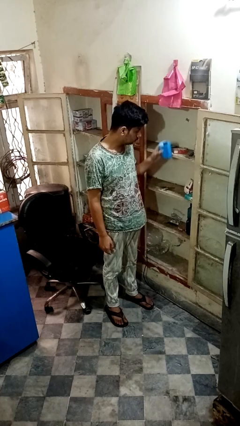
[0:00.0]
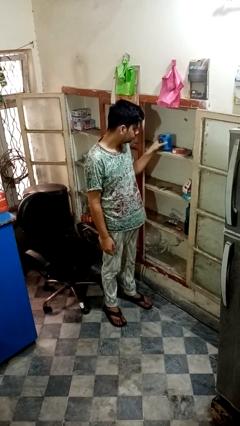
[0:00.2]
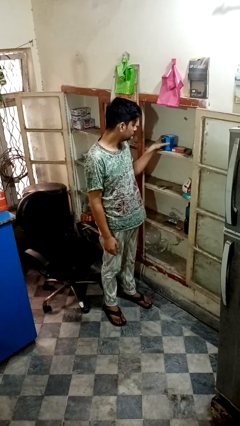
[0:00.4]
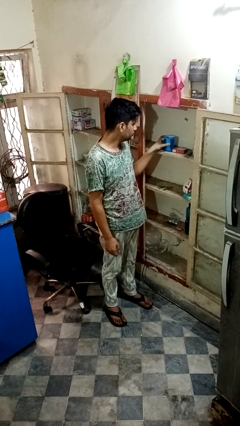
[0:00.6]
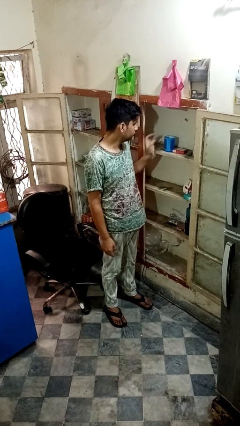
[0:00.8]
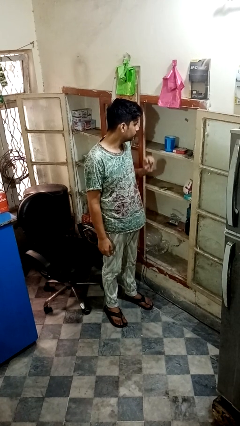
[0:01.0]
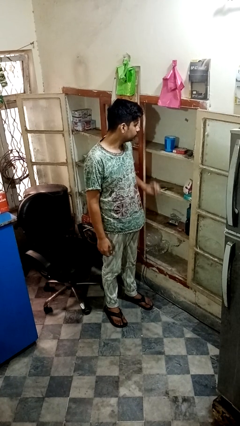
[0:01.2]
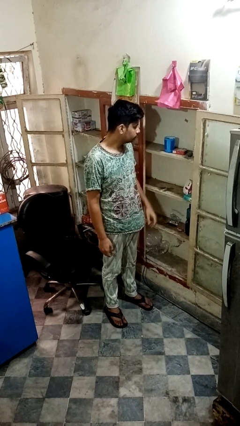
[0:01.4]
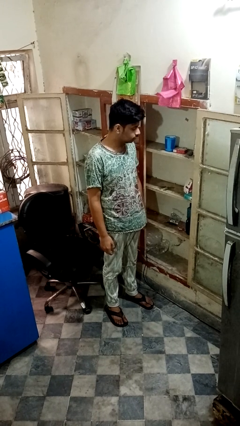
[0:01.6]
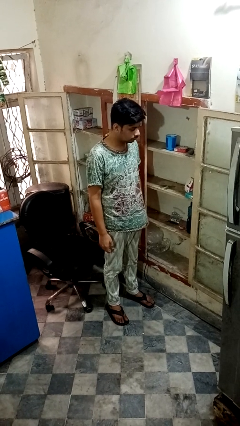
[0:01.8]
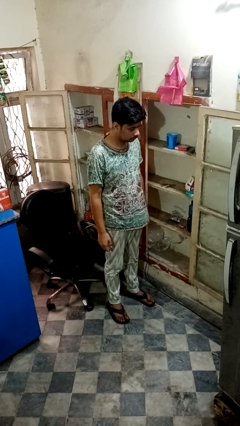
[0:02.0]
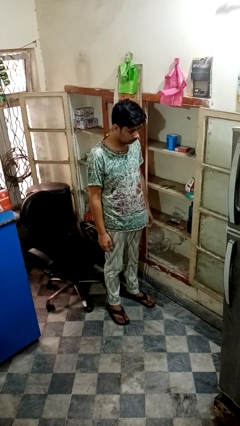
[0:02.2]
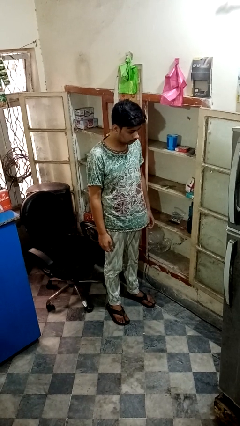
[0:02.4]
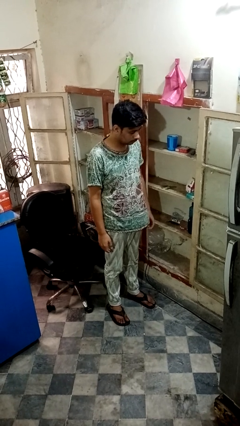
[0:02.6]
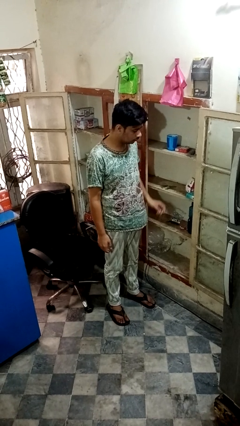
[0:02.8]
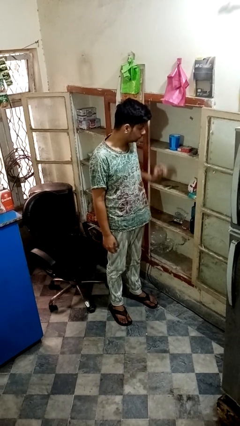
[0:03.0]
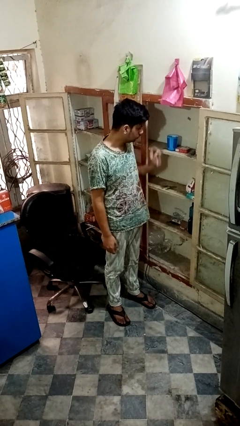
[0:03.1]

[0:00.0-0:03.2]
person puts object in cabinet

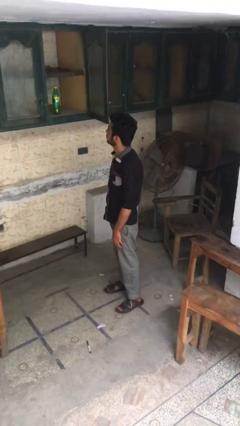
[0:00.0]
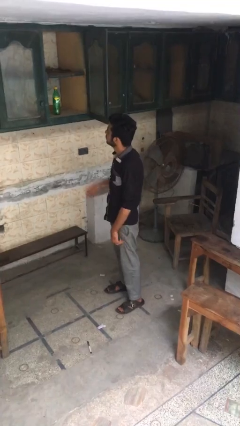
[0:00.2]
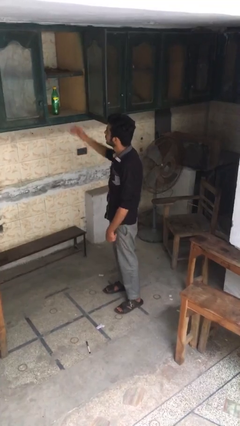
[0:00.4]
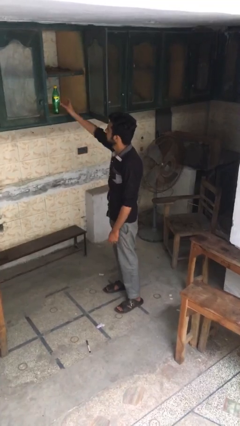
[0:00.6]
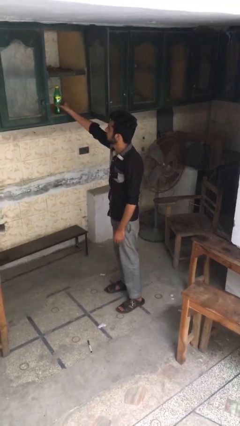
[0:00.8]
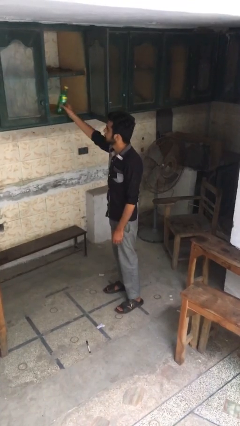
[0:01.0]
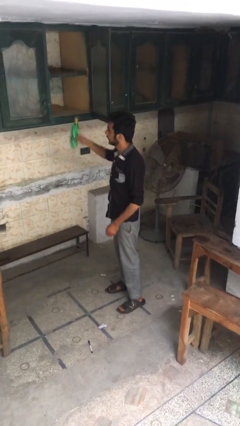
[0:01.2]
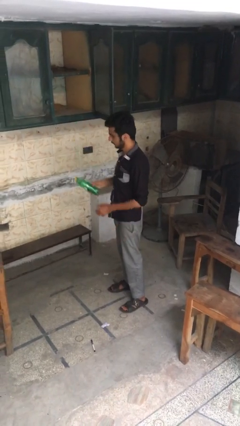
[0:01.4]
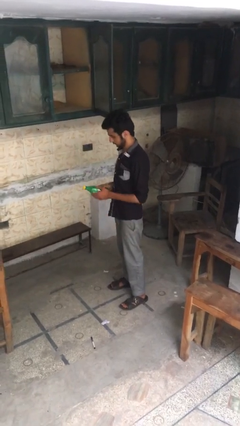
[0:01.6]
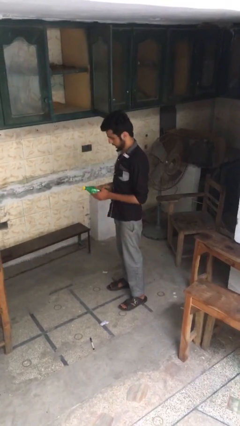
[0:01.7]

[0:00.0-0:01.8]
person takes object from cabinet

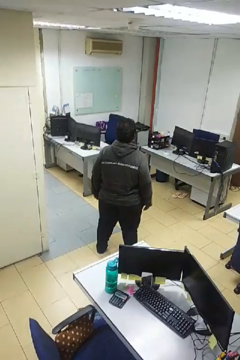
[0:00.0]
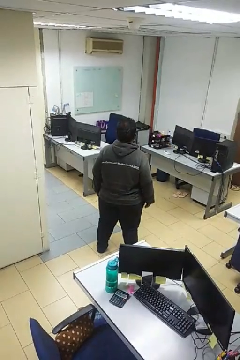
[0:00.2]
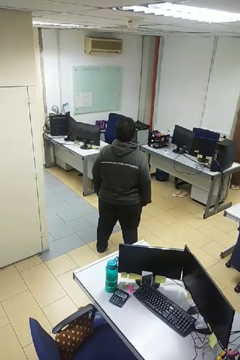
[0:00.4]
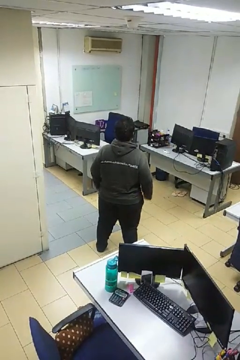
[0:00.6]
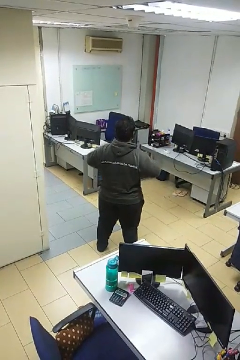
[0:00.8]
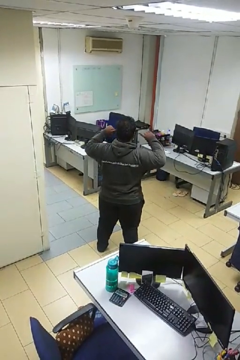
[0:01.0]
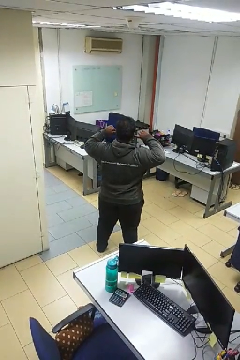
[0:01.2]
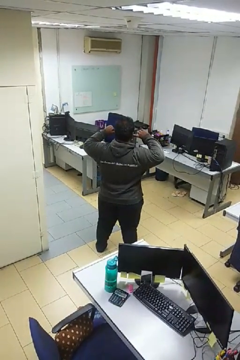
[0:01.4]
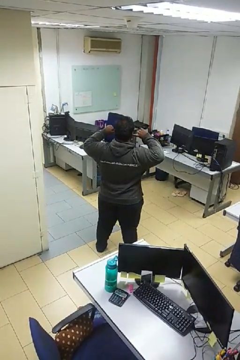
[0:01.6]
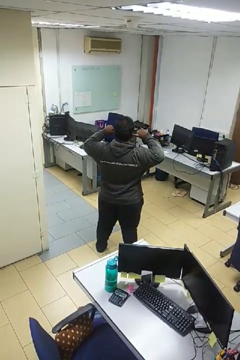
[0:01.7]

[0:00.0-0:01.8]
person puts fingers in ear

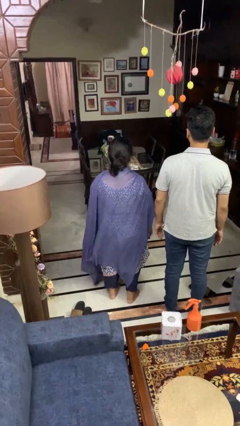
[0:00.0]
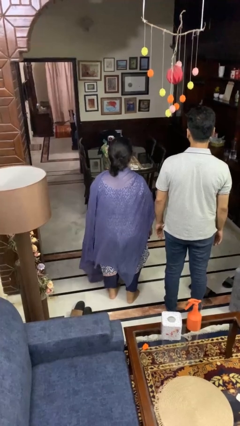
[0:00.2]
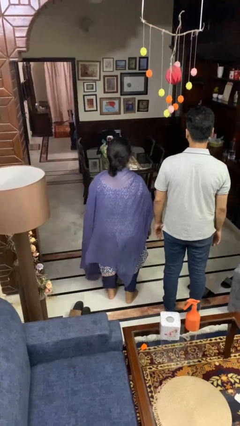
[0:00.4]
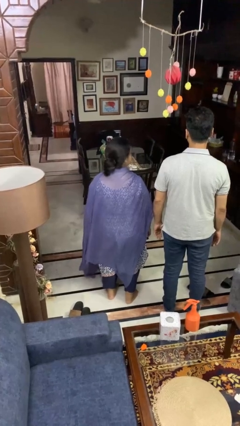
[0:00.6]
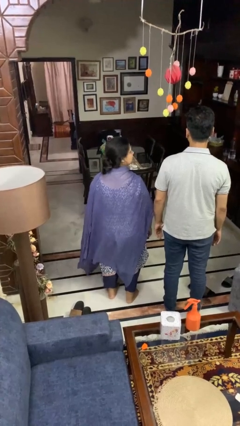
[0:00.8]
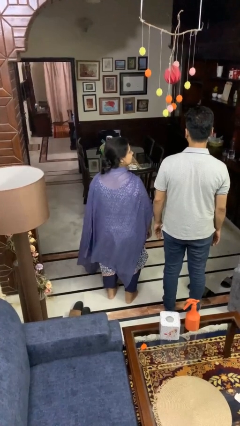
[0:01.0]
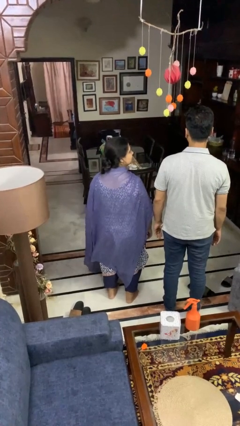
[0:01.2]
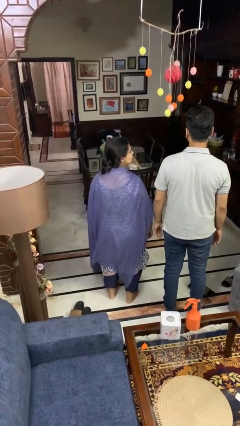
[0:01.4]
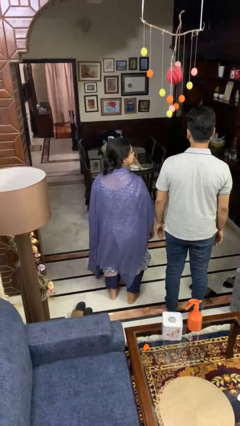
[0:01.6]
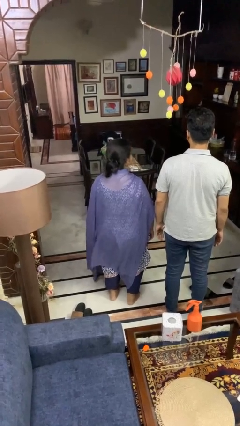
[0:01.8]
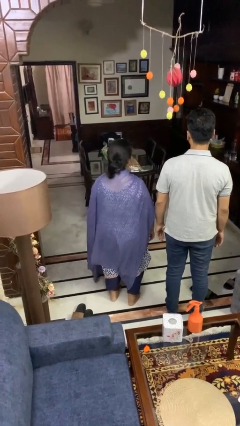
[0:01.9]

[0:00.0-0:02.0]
person looks over shoulder

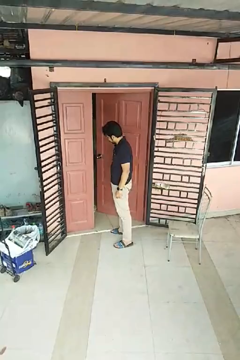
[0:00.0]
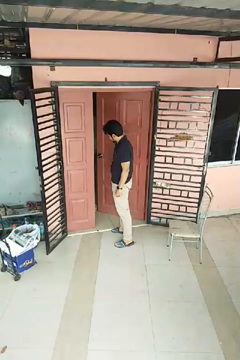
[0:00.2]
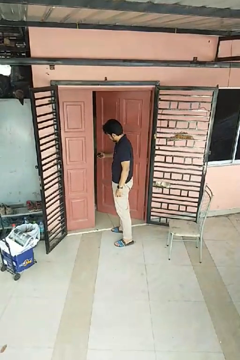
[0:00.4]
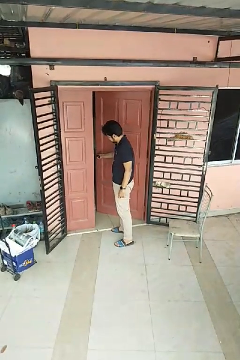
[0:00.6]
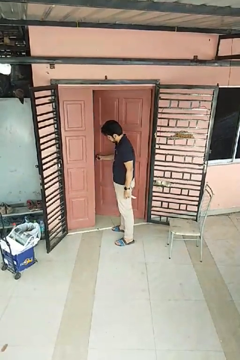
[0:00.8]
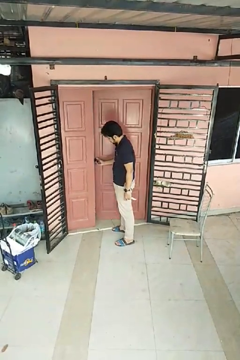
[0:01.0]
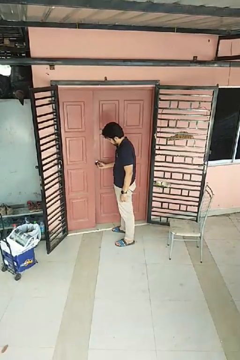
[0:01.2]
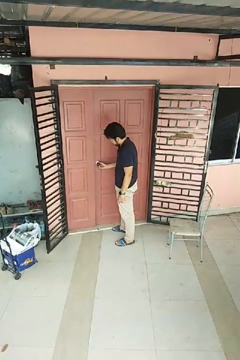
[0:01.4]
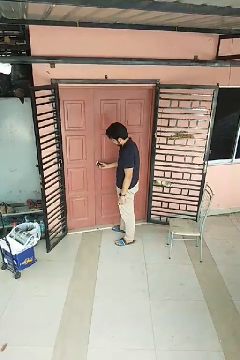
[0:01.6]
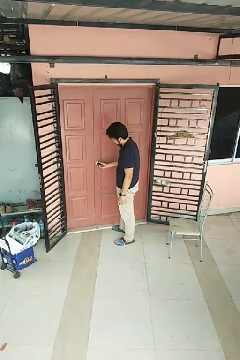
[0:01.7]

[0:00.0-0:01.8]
person closes facility door

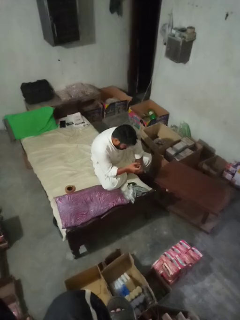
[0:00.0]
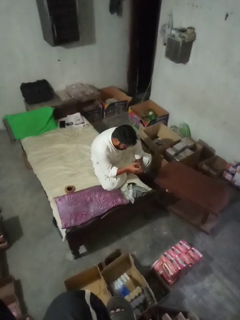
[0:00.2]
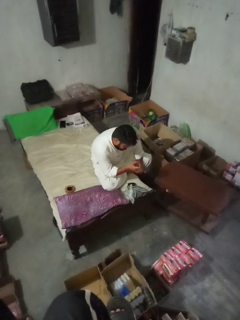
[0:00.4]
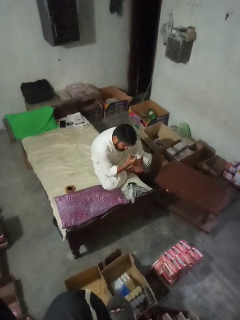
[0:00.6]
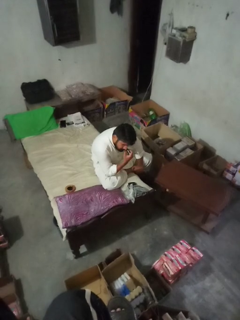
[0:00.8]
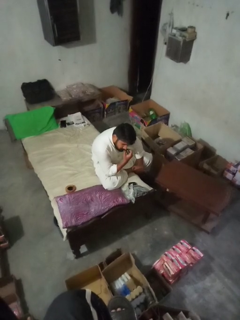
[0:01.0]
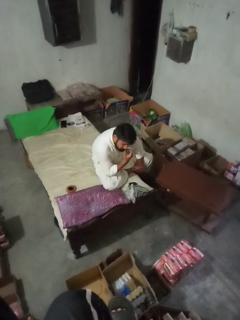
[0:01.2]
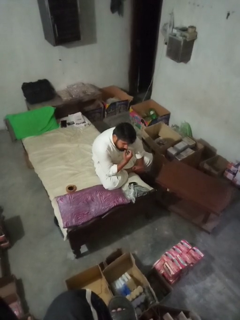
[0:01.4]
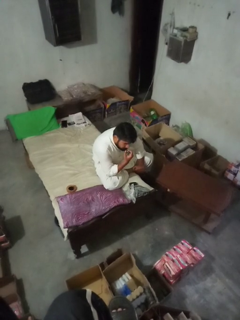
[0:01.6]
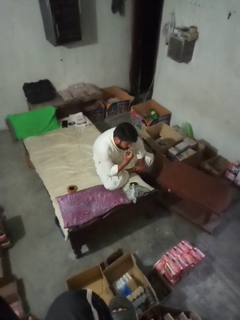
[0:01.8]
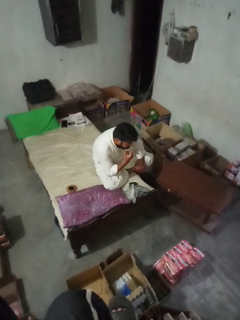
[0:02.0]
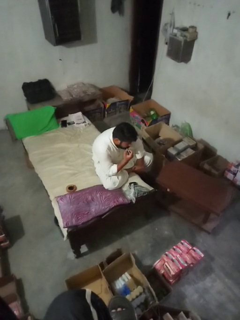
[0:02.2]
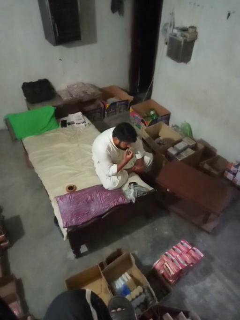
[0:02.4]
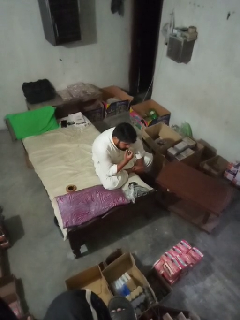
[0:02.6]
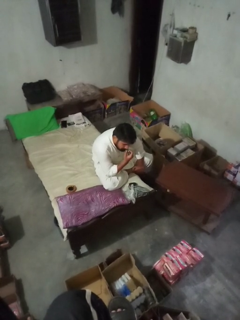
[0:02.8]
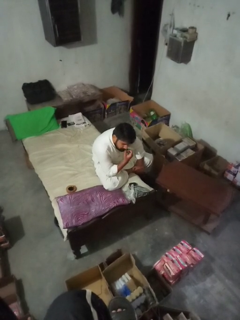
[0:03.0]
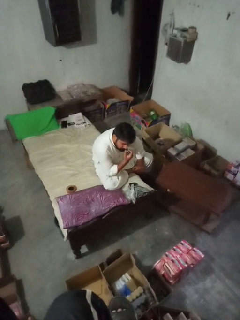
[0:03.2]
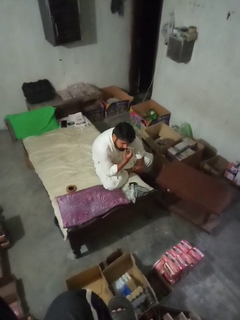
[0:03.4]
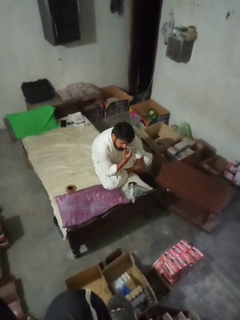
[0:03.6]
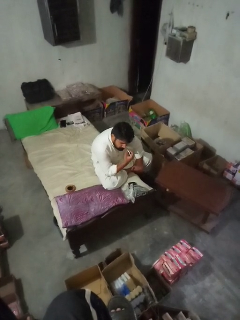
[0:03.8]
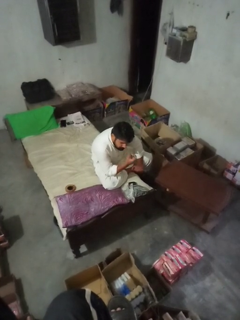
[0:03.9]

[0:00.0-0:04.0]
person applies lip makeup

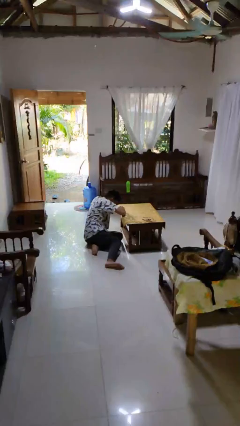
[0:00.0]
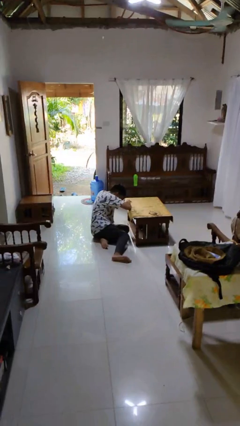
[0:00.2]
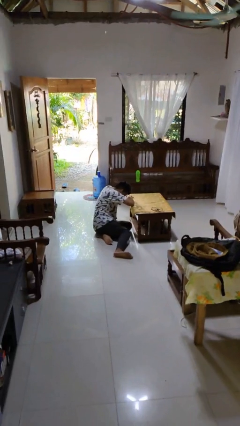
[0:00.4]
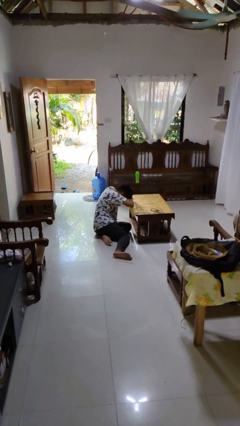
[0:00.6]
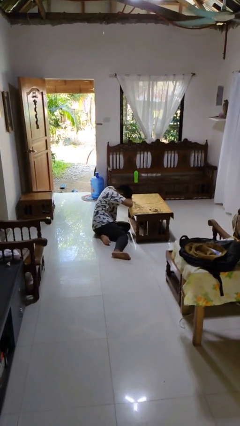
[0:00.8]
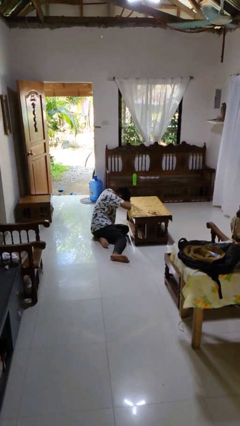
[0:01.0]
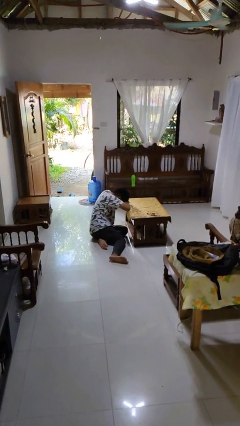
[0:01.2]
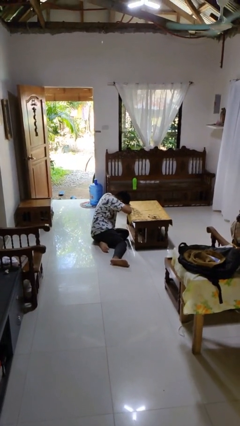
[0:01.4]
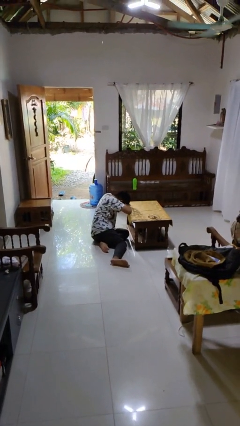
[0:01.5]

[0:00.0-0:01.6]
person lies down on floor

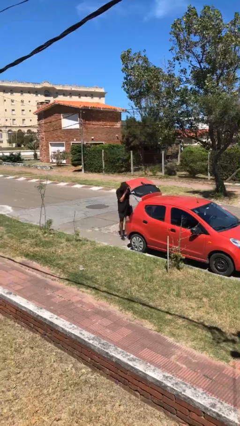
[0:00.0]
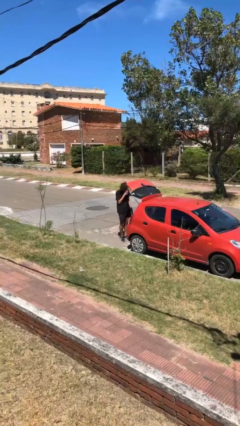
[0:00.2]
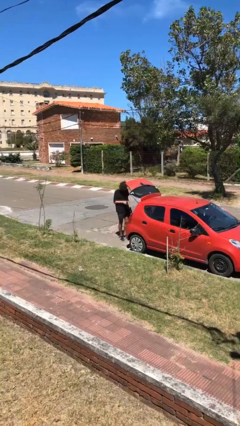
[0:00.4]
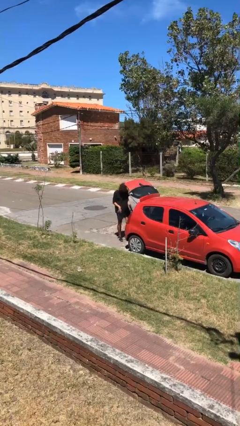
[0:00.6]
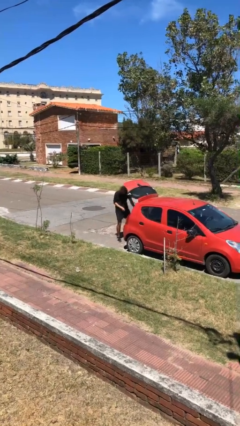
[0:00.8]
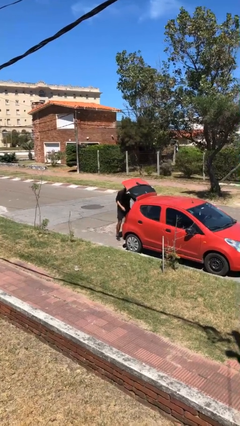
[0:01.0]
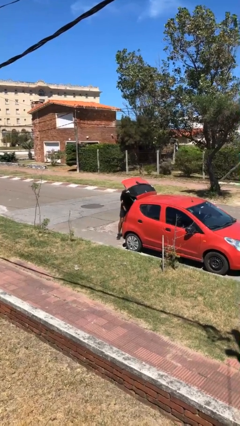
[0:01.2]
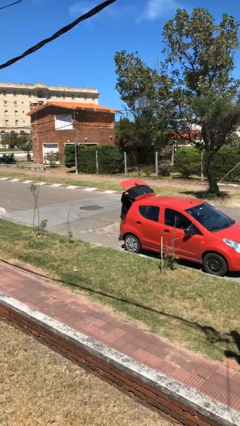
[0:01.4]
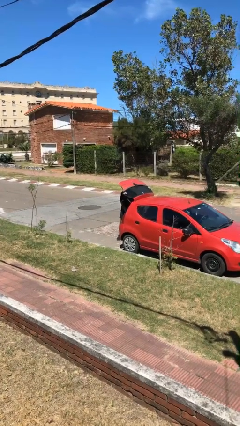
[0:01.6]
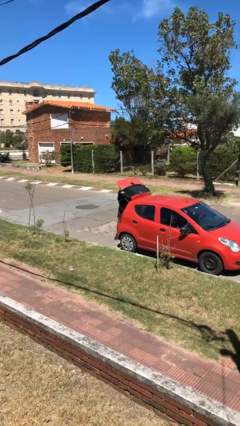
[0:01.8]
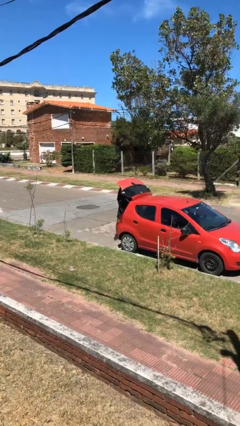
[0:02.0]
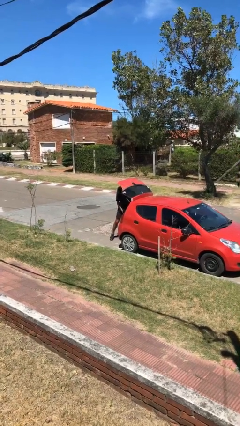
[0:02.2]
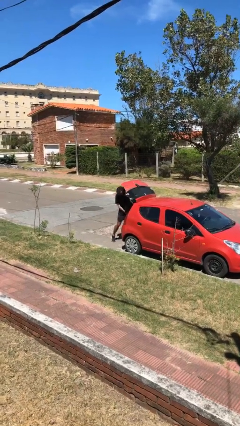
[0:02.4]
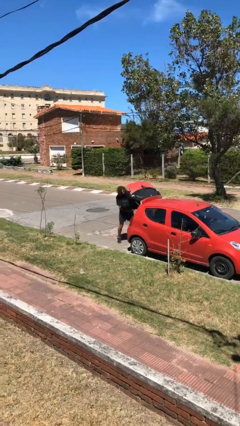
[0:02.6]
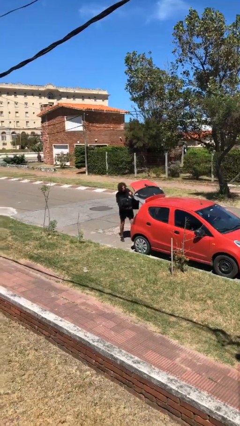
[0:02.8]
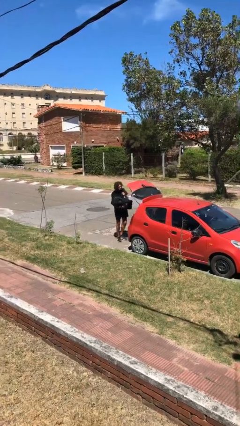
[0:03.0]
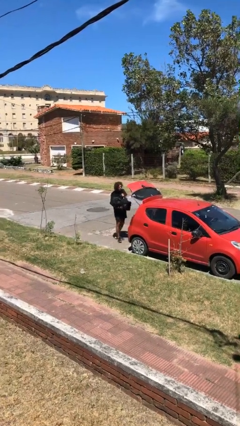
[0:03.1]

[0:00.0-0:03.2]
person unloads car
